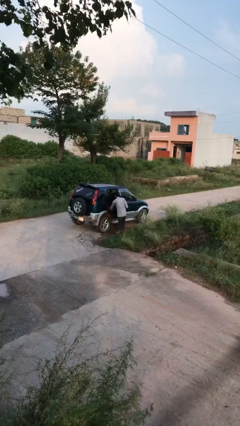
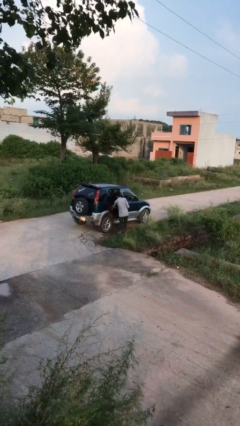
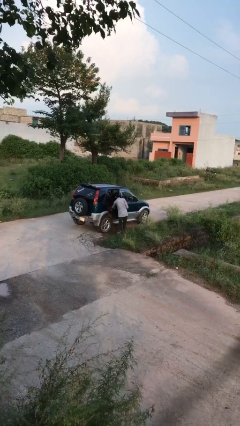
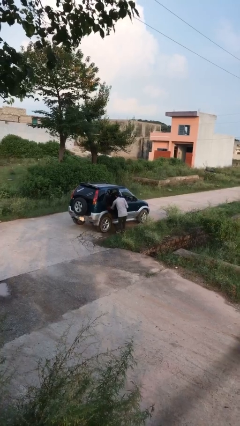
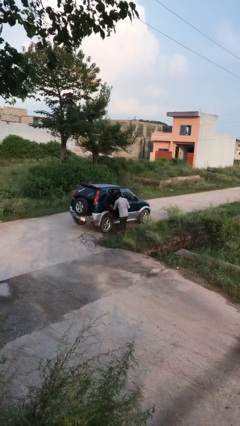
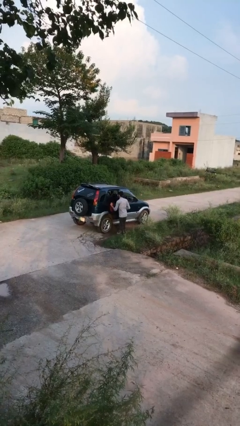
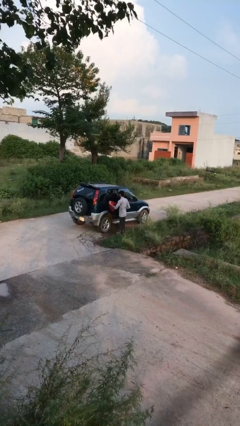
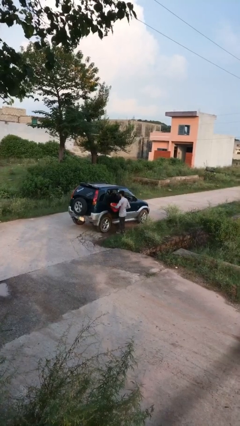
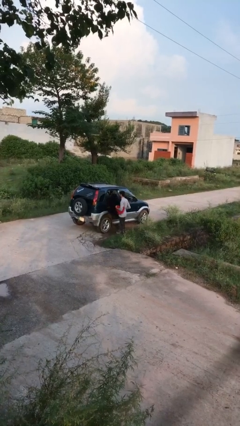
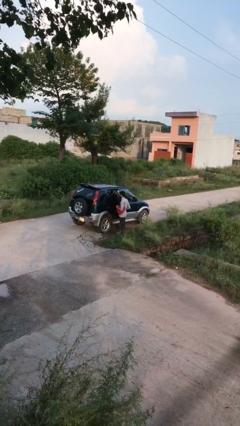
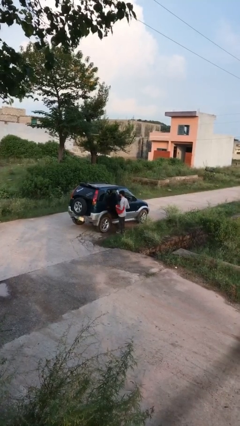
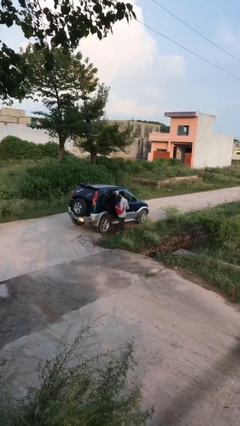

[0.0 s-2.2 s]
person unloads car

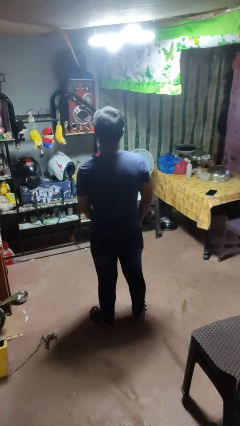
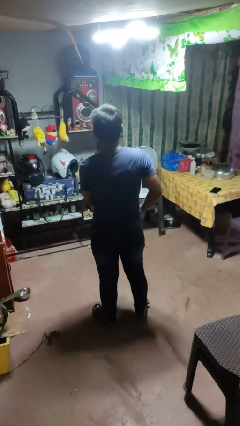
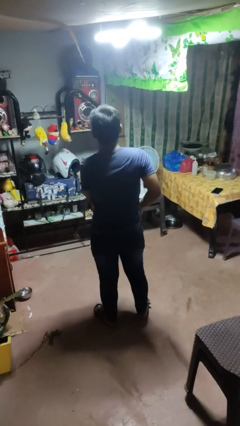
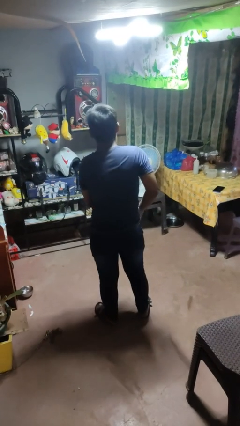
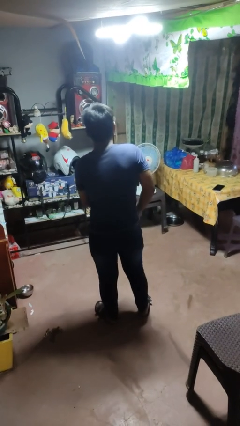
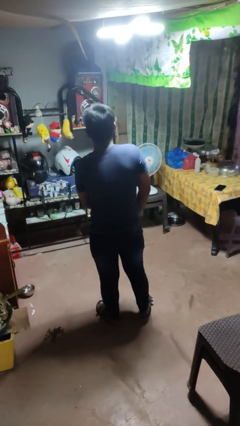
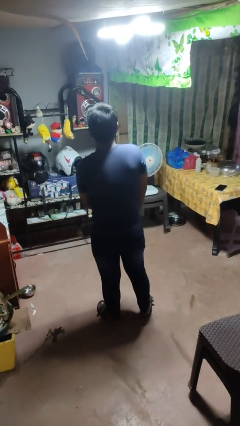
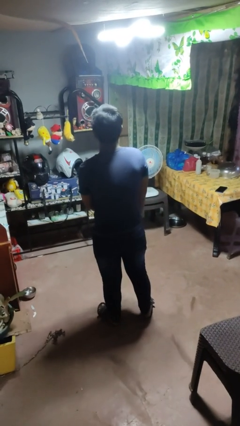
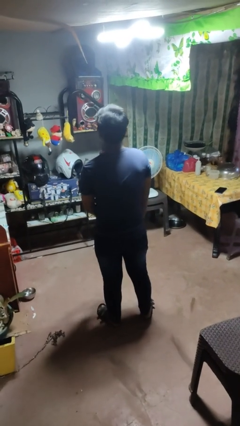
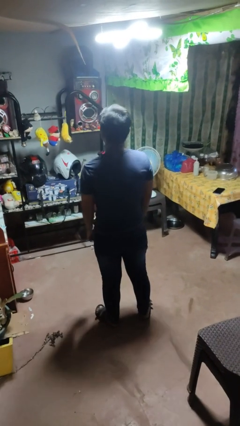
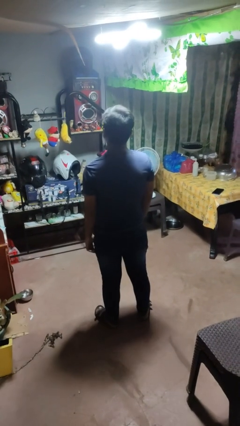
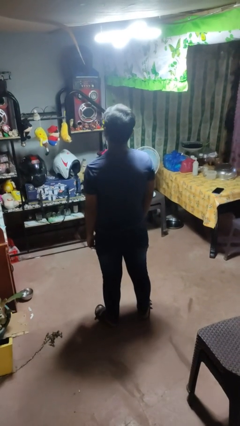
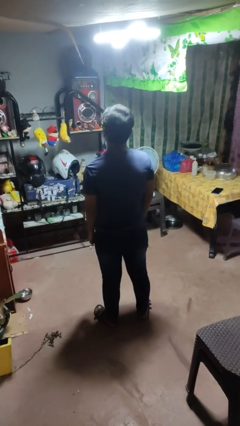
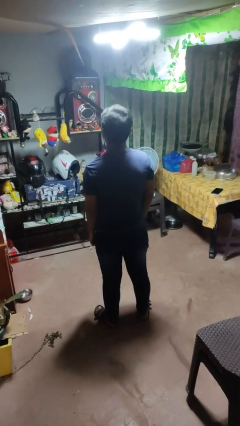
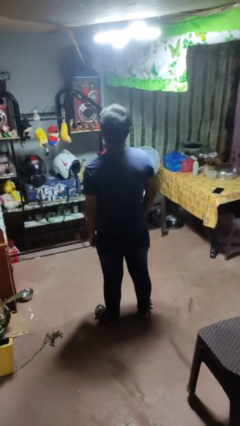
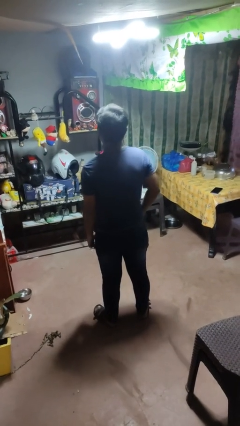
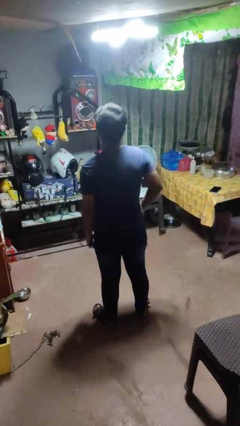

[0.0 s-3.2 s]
person puts hands in back pockets

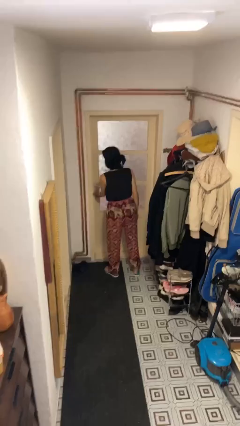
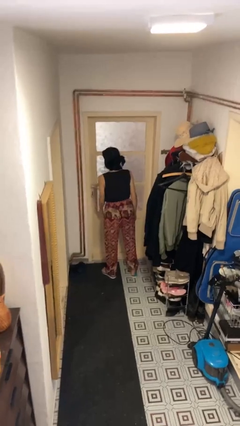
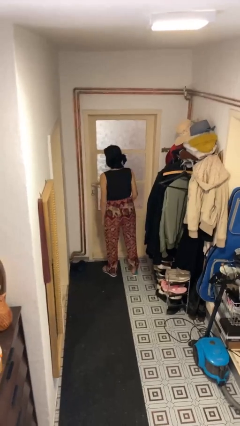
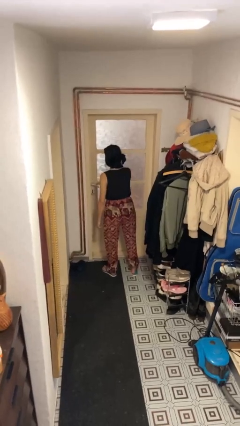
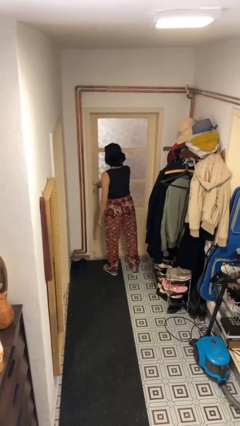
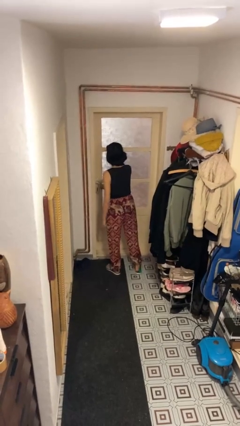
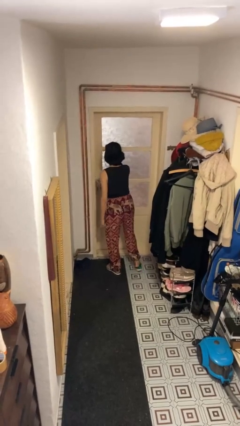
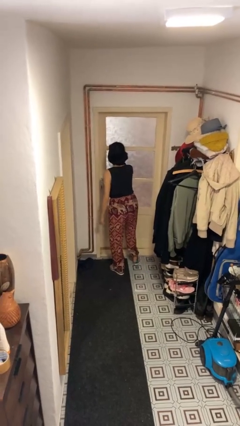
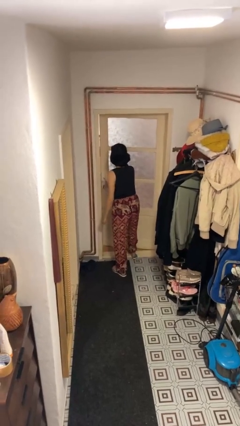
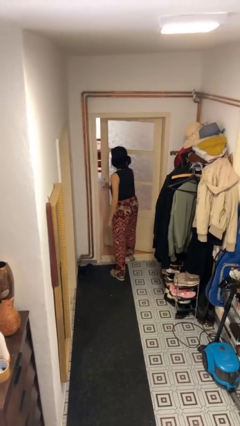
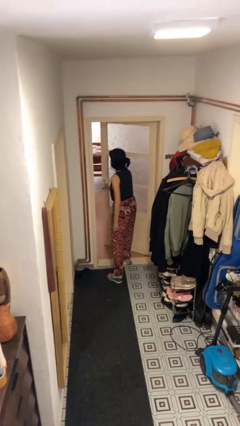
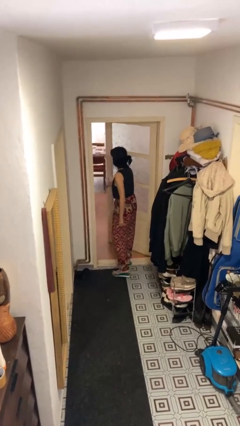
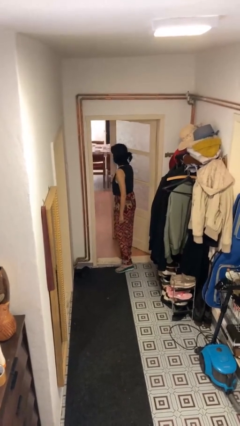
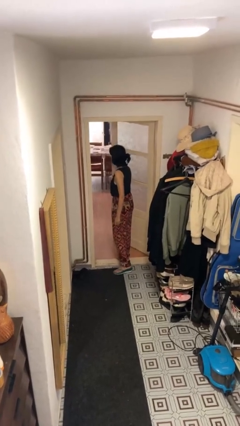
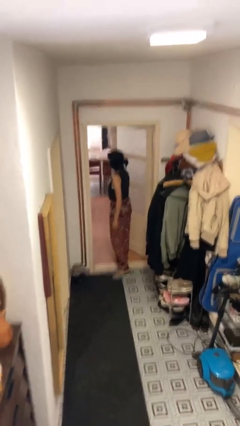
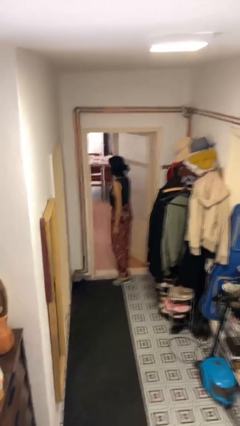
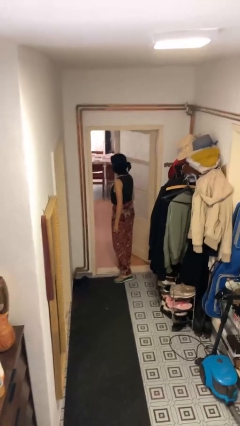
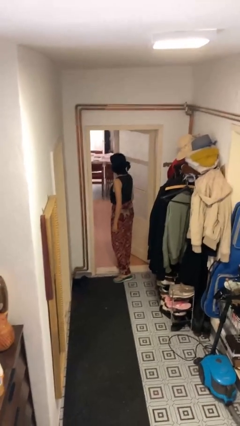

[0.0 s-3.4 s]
person opens facility door

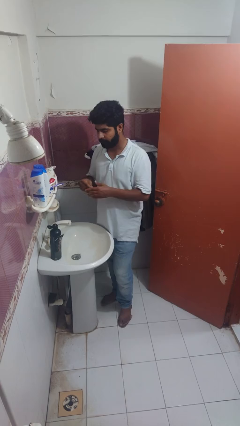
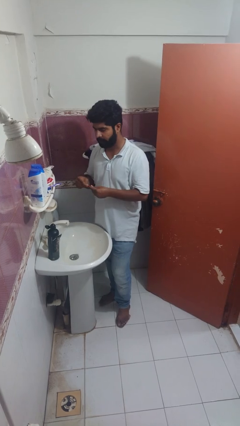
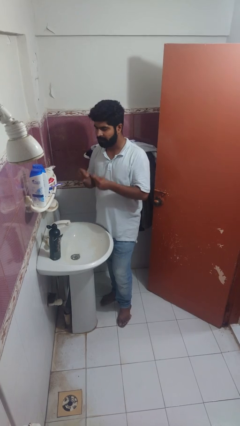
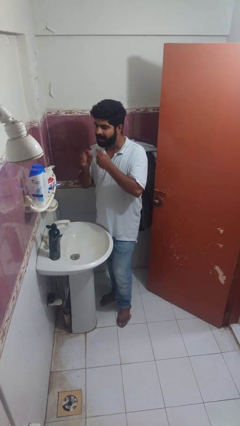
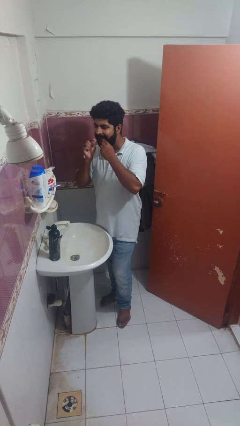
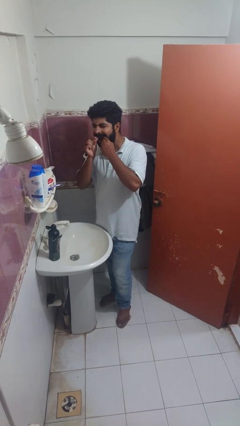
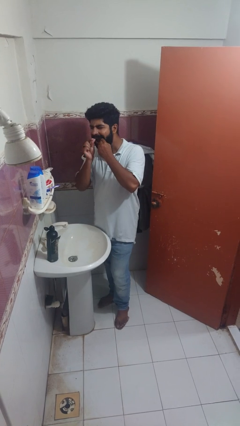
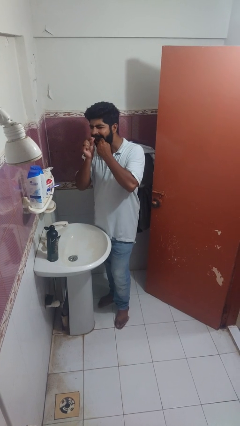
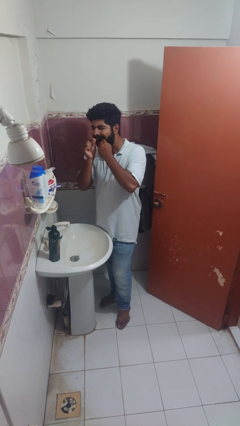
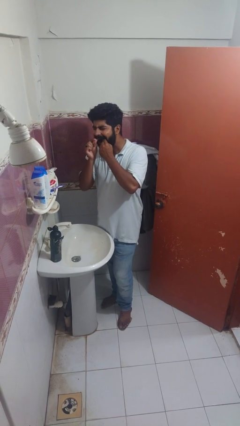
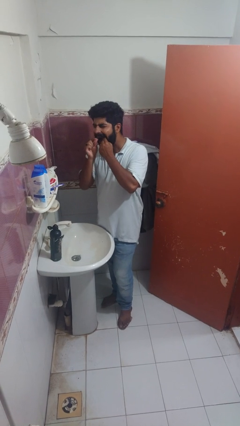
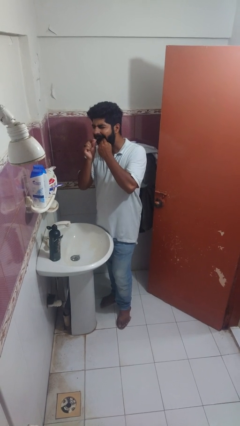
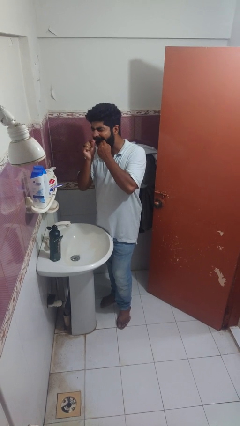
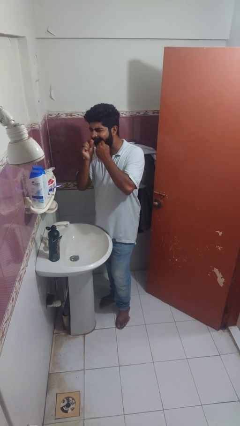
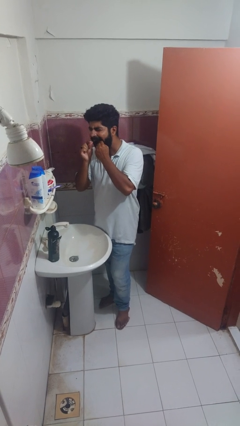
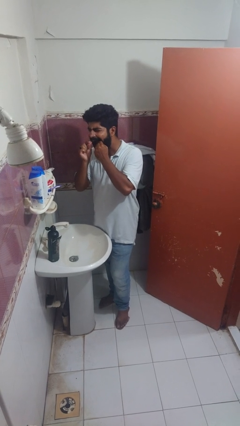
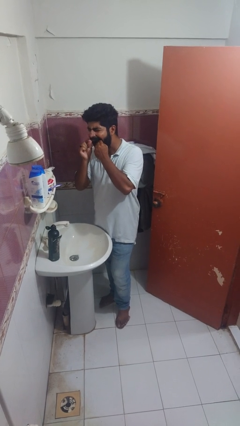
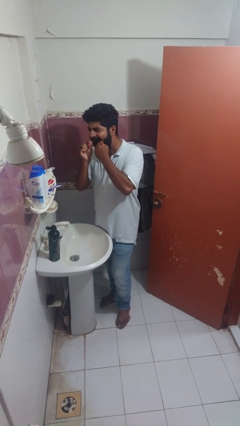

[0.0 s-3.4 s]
person flosses

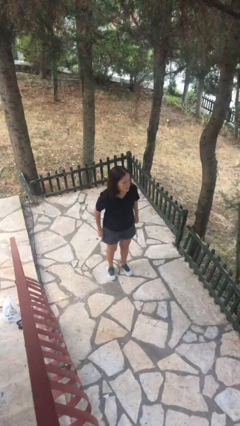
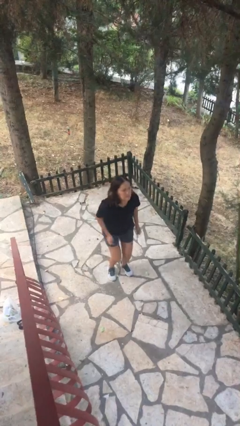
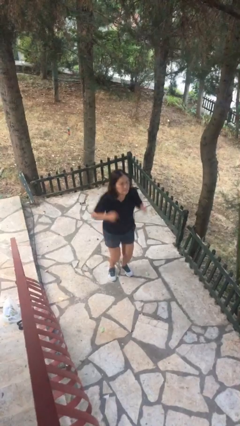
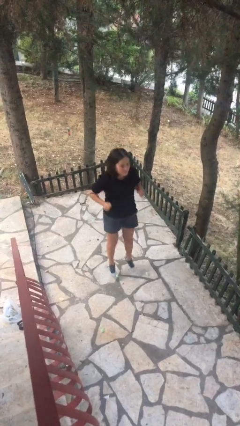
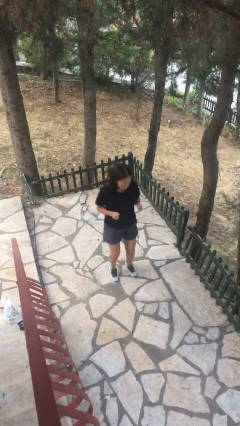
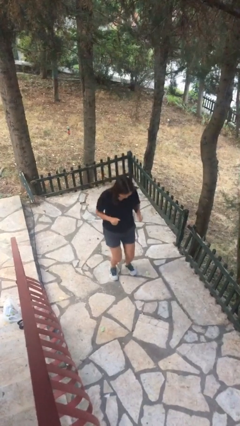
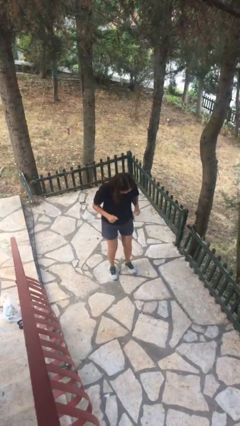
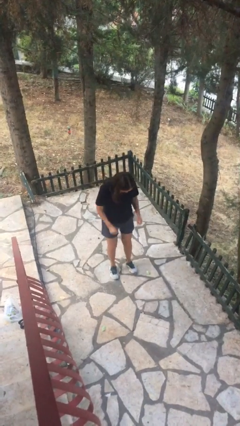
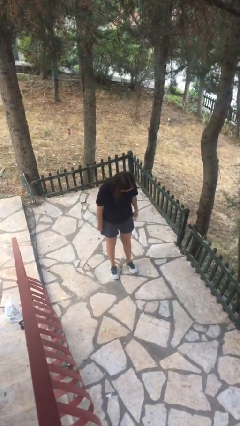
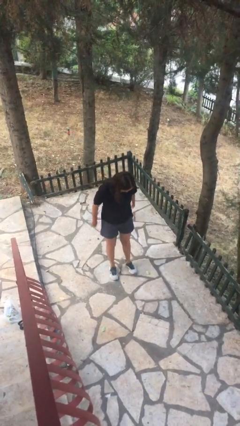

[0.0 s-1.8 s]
person jumps

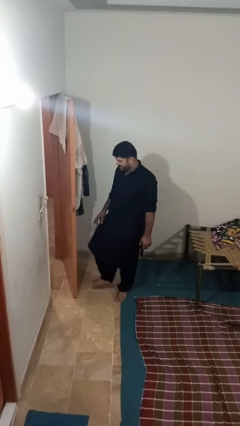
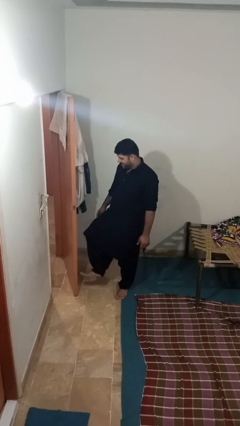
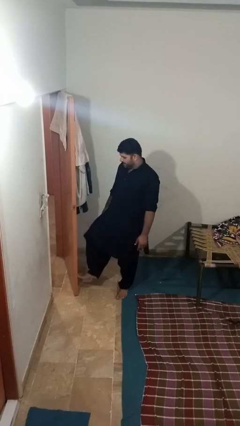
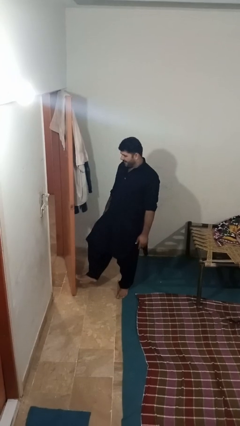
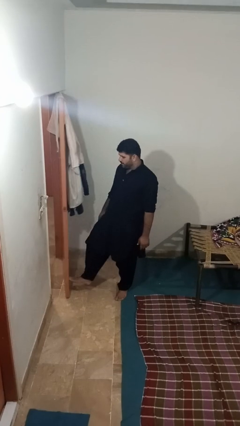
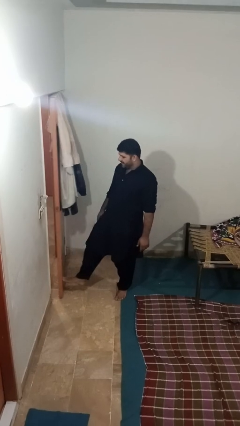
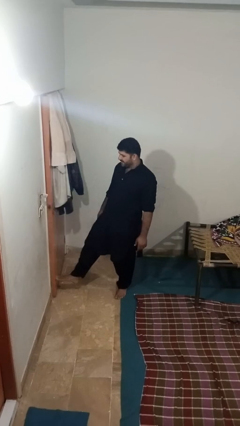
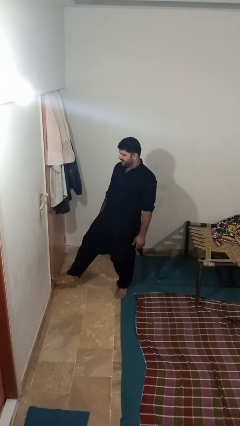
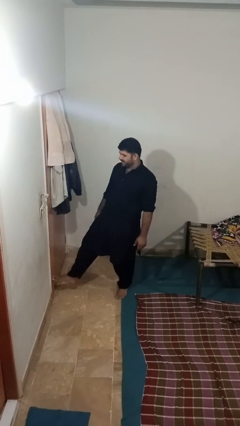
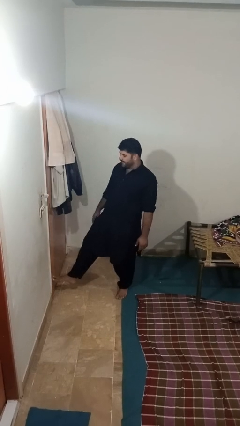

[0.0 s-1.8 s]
person closes door with foot

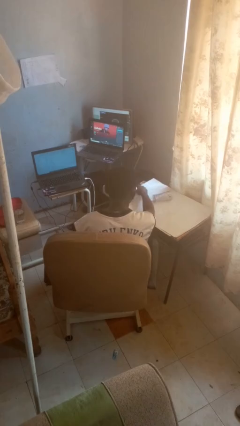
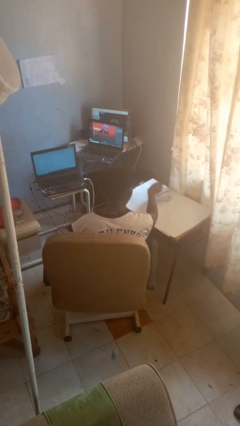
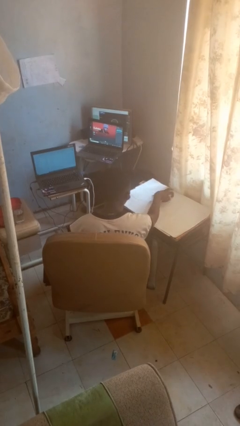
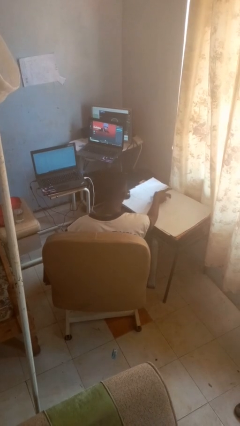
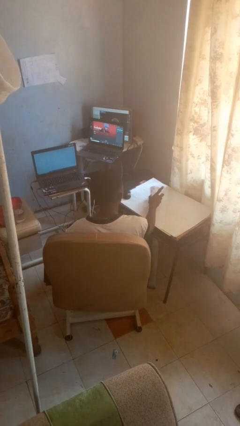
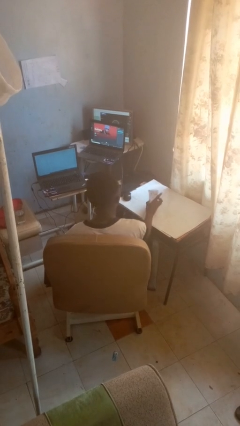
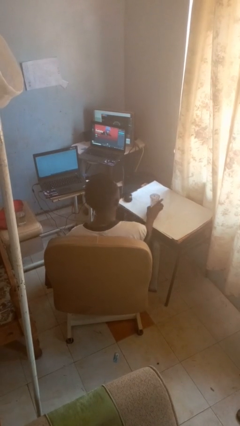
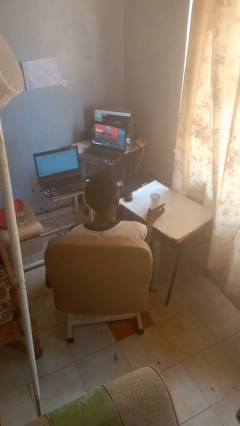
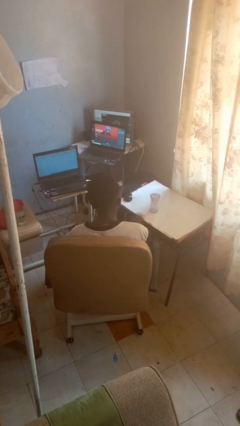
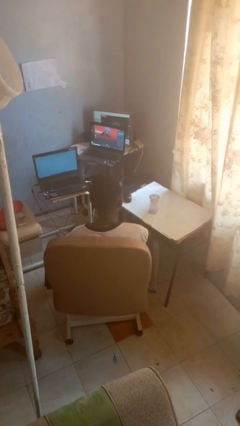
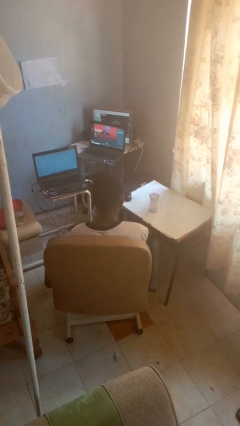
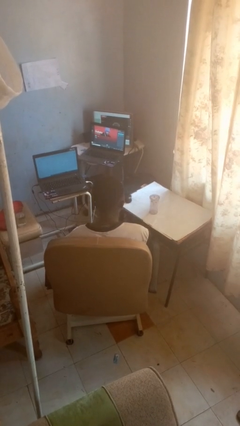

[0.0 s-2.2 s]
person sets upright glass
